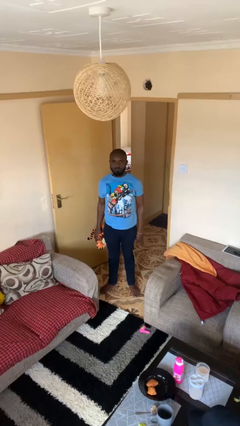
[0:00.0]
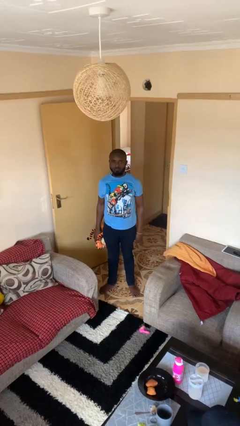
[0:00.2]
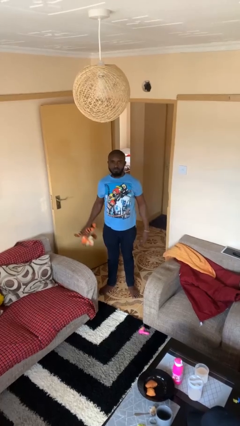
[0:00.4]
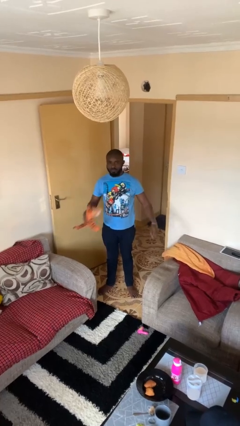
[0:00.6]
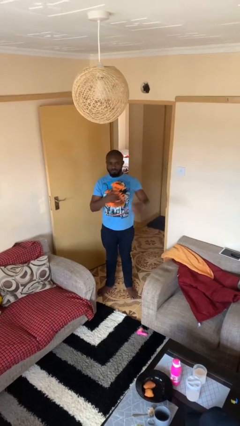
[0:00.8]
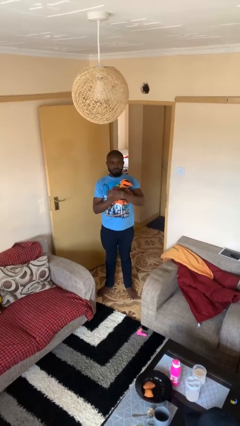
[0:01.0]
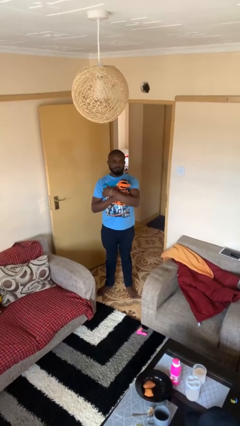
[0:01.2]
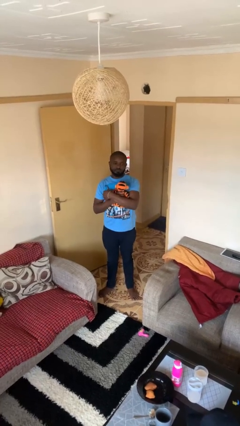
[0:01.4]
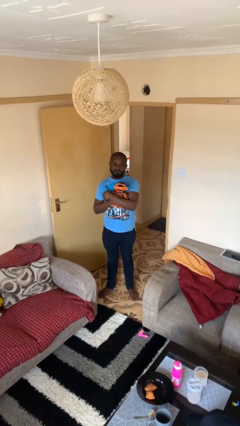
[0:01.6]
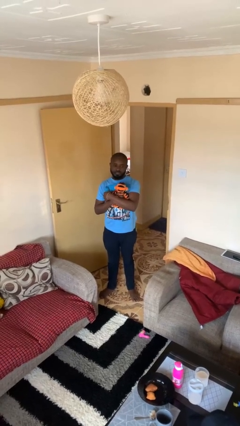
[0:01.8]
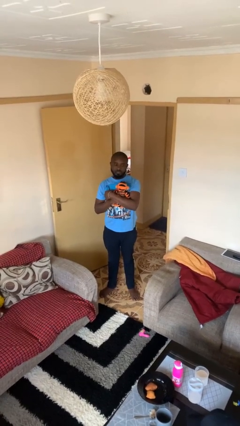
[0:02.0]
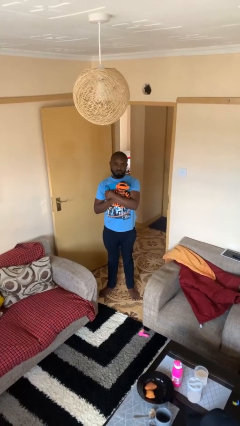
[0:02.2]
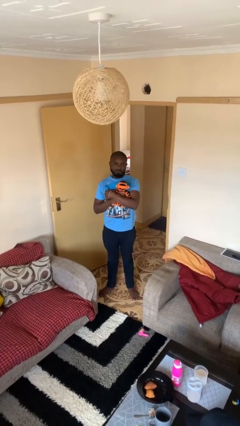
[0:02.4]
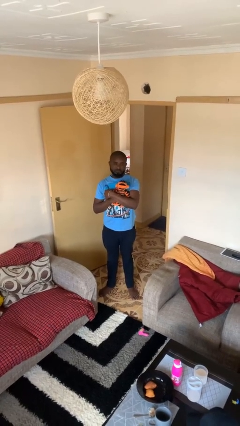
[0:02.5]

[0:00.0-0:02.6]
person hugs stuffed animal

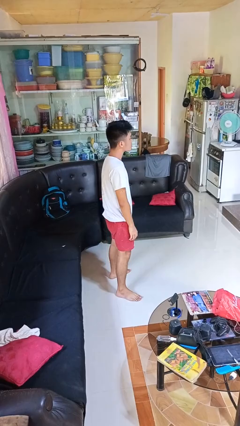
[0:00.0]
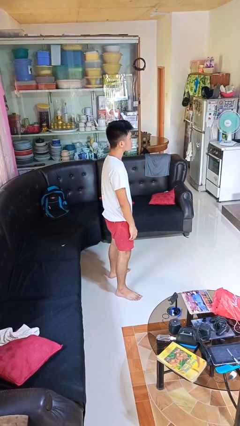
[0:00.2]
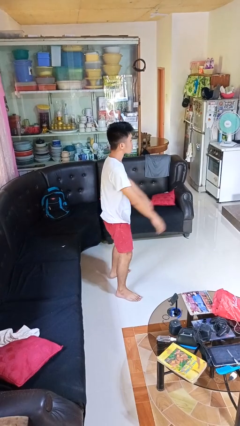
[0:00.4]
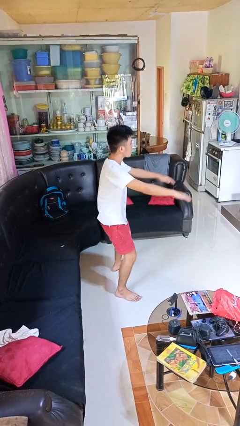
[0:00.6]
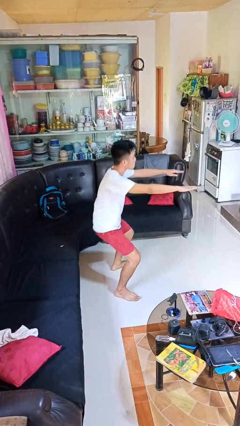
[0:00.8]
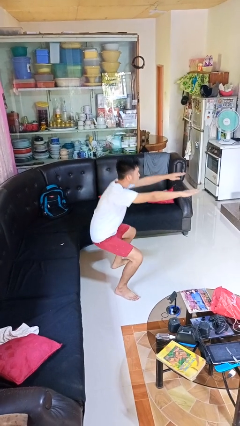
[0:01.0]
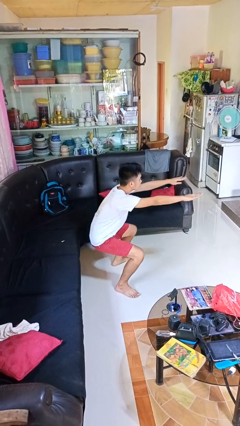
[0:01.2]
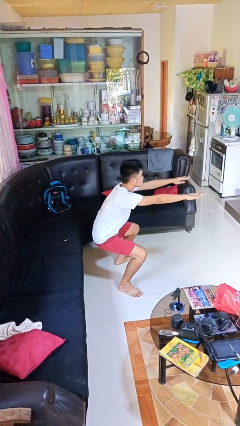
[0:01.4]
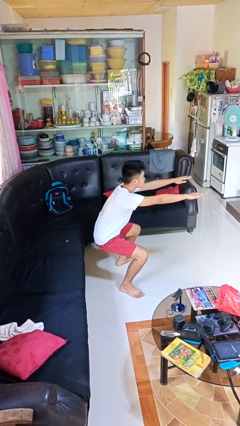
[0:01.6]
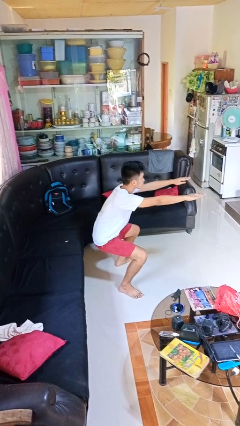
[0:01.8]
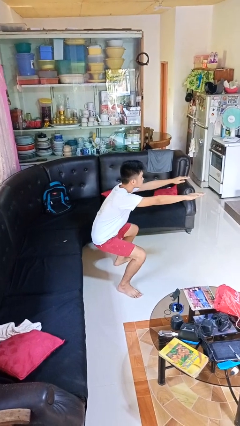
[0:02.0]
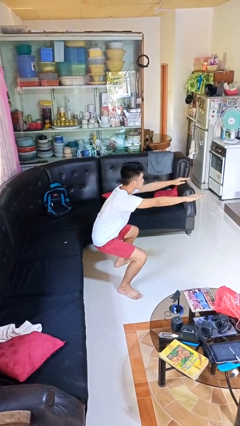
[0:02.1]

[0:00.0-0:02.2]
person squats

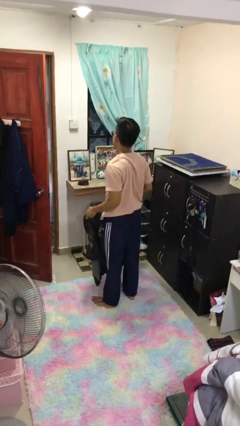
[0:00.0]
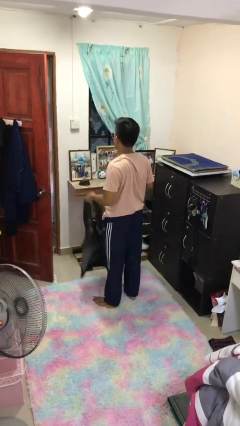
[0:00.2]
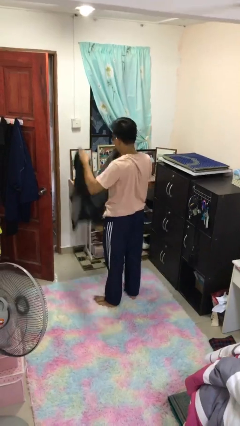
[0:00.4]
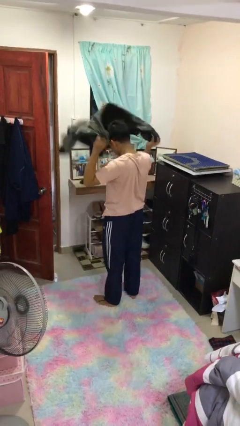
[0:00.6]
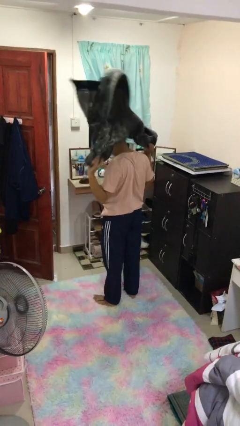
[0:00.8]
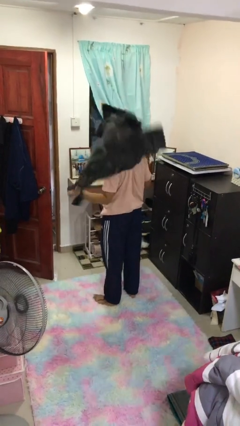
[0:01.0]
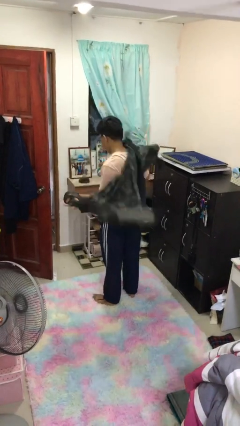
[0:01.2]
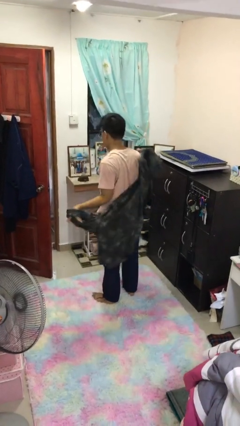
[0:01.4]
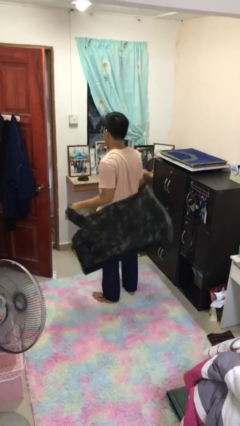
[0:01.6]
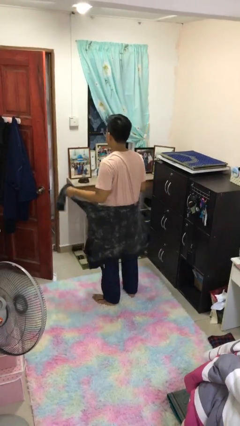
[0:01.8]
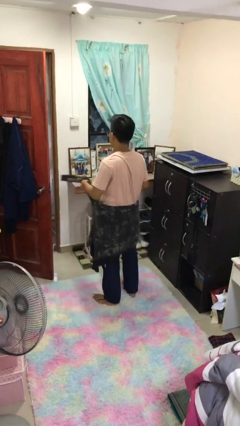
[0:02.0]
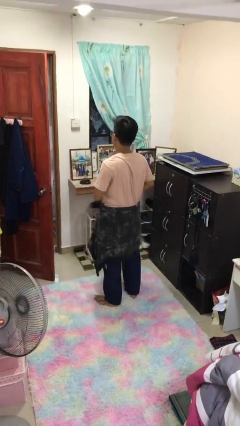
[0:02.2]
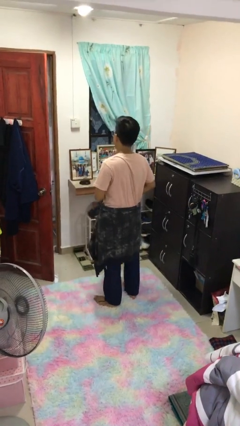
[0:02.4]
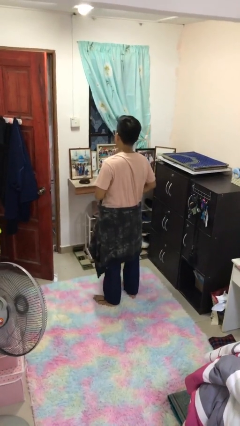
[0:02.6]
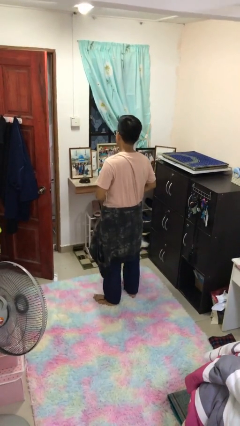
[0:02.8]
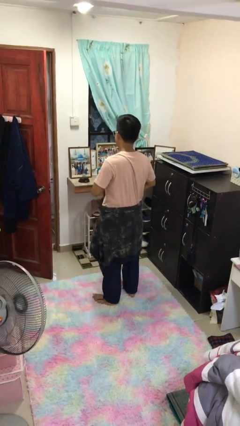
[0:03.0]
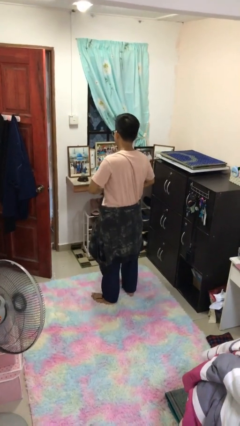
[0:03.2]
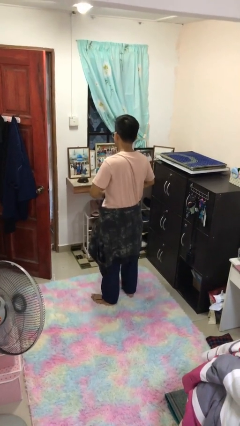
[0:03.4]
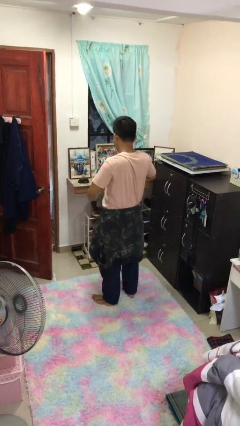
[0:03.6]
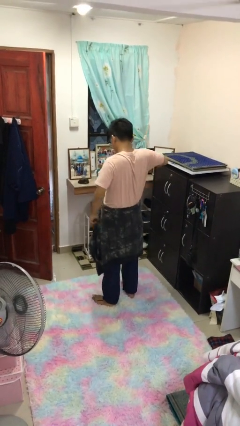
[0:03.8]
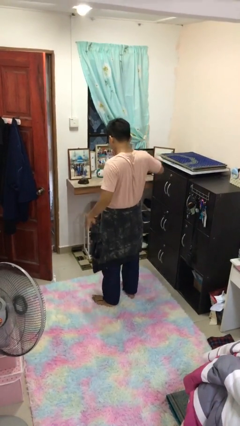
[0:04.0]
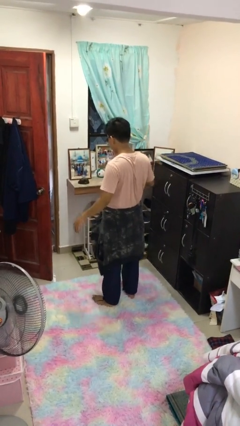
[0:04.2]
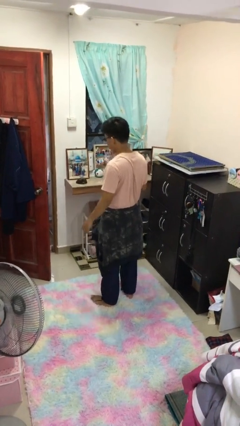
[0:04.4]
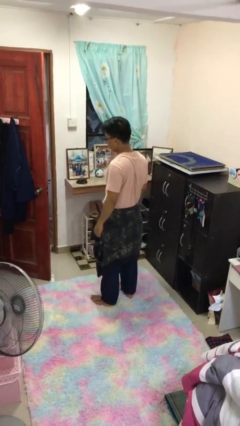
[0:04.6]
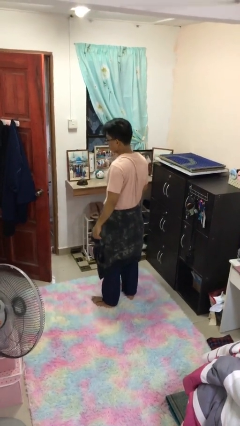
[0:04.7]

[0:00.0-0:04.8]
person ties jacket around waist

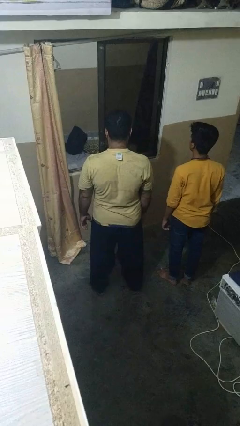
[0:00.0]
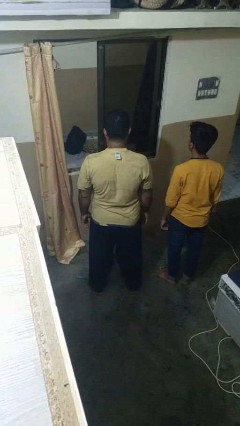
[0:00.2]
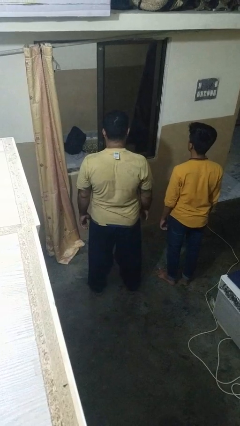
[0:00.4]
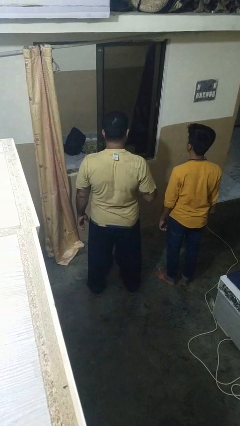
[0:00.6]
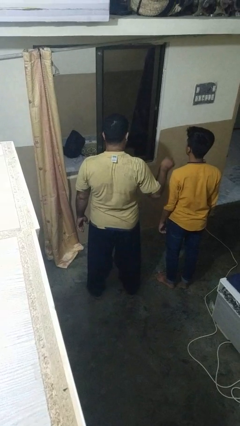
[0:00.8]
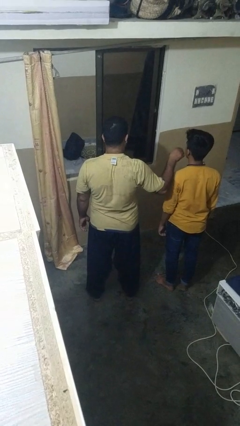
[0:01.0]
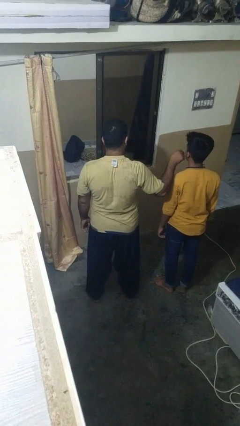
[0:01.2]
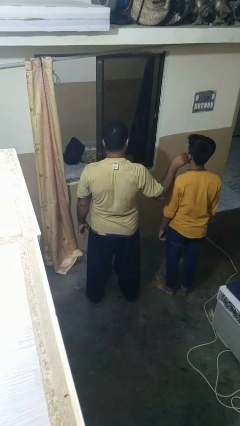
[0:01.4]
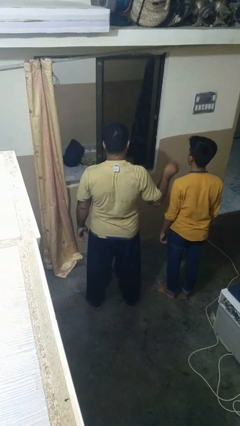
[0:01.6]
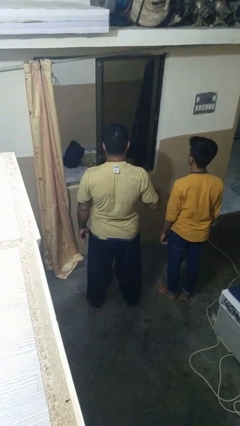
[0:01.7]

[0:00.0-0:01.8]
person touches face of person

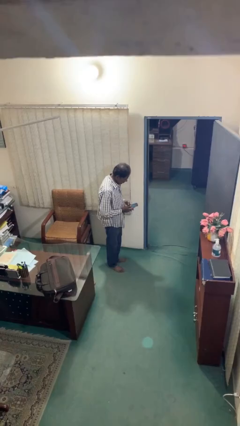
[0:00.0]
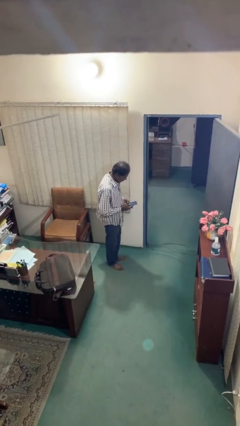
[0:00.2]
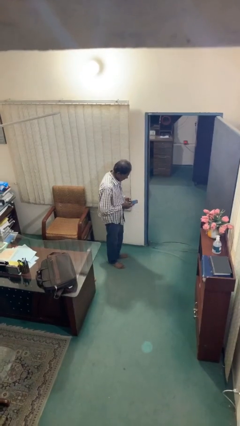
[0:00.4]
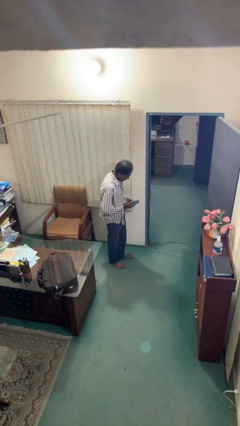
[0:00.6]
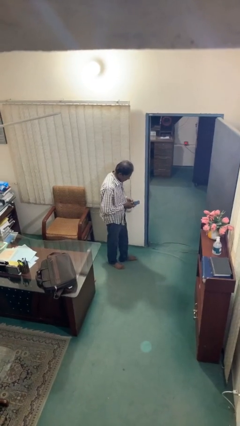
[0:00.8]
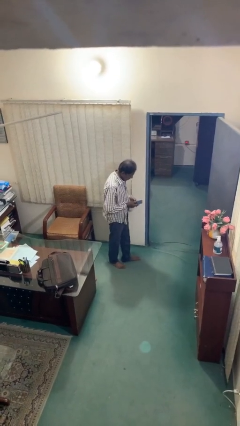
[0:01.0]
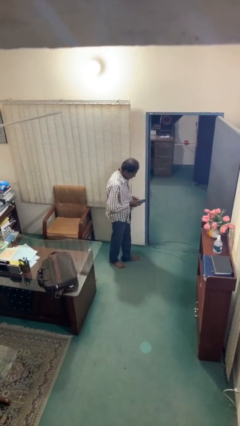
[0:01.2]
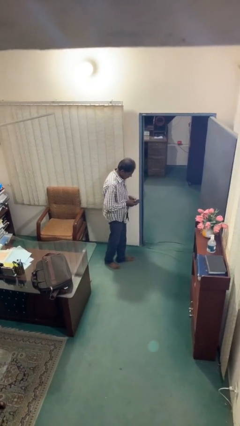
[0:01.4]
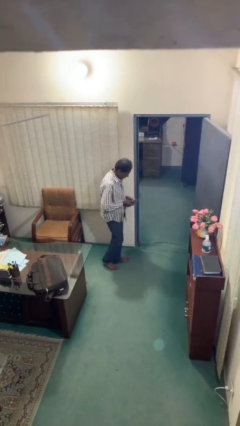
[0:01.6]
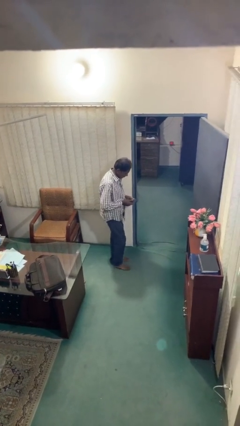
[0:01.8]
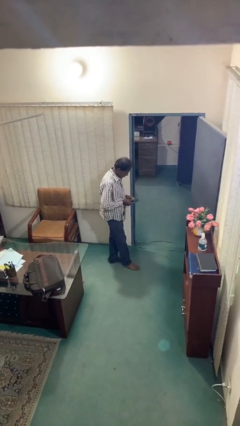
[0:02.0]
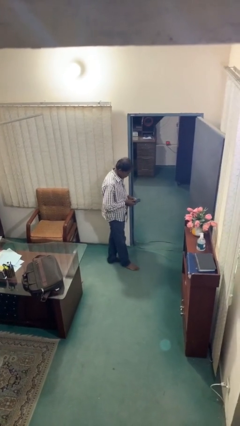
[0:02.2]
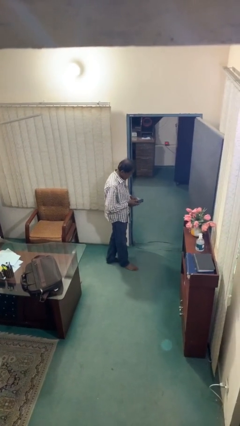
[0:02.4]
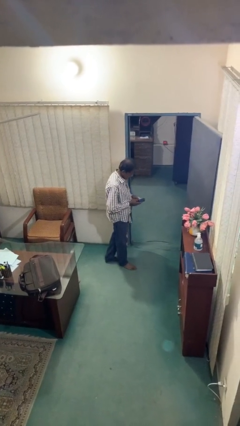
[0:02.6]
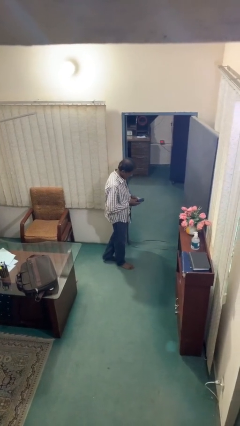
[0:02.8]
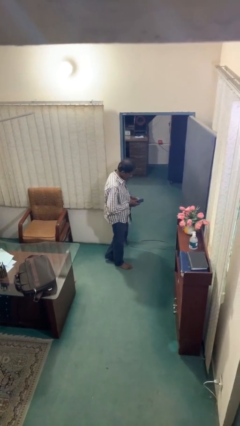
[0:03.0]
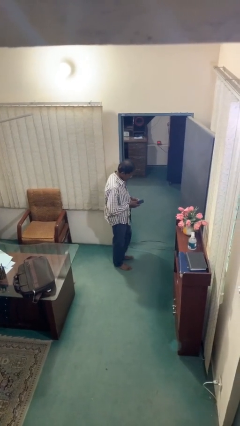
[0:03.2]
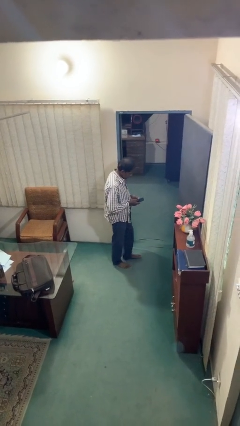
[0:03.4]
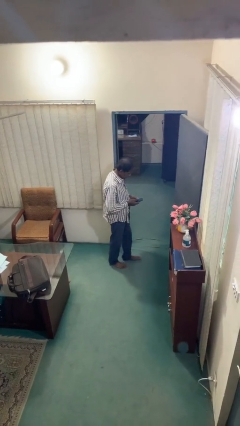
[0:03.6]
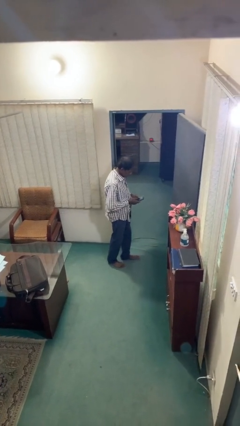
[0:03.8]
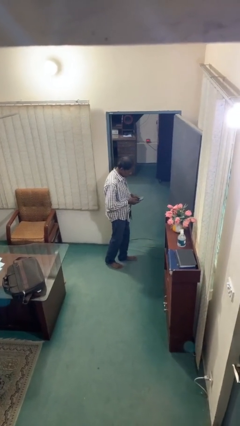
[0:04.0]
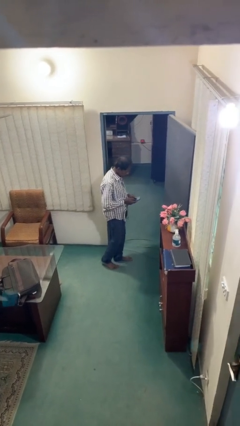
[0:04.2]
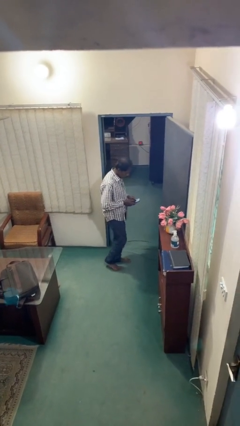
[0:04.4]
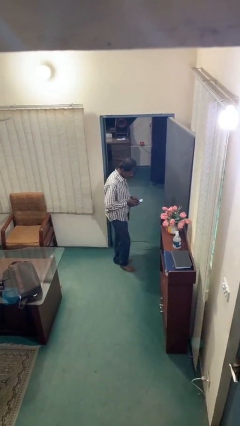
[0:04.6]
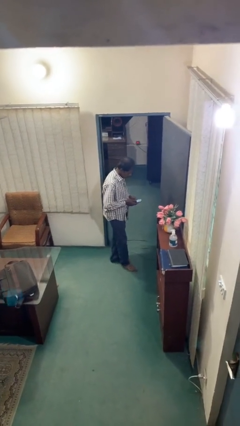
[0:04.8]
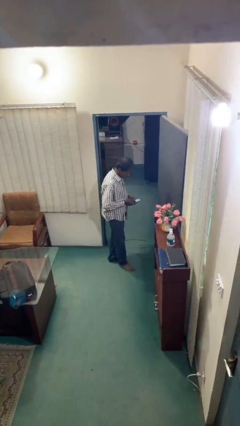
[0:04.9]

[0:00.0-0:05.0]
person texts on phone

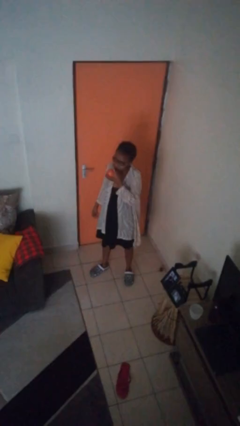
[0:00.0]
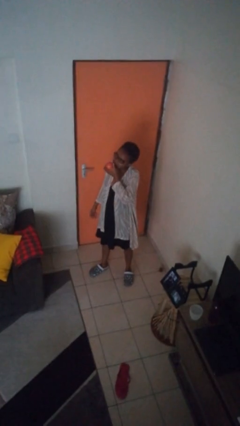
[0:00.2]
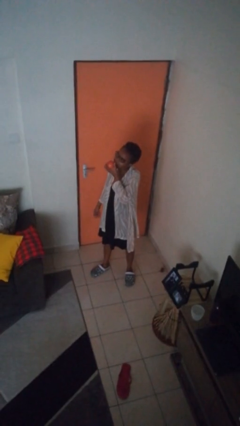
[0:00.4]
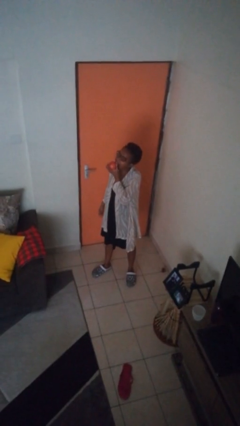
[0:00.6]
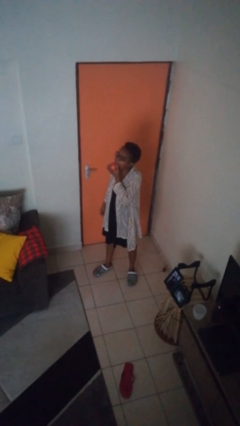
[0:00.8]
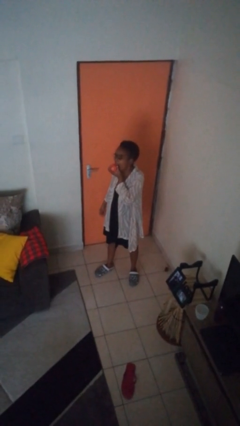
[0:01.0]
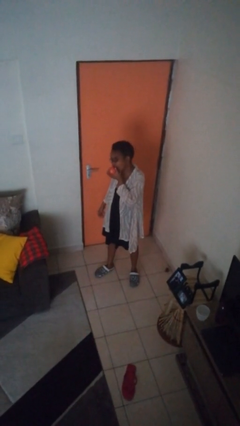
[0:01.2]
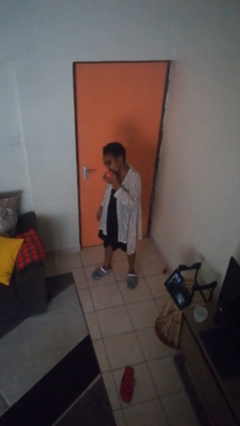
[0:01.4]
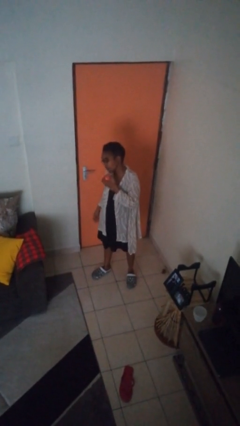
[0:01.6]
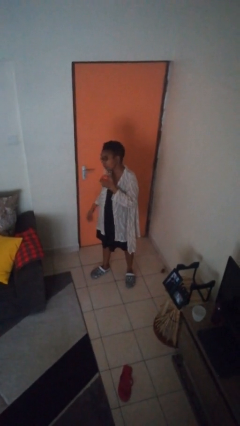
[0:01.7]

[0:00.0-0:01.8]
person eats apple
